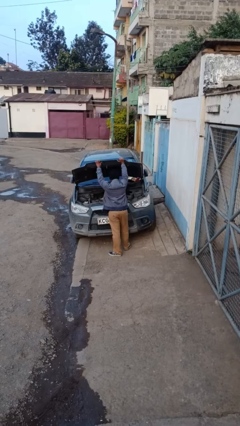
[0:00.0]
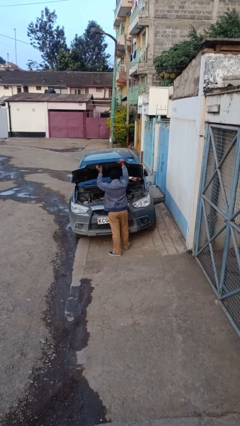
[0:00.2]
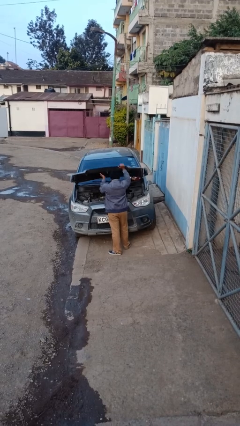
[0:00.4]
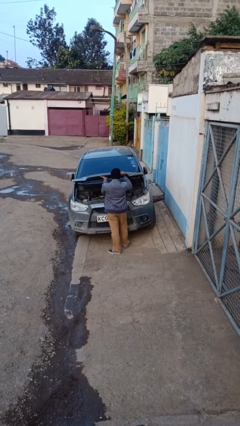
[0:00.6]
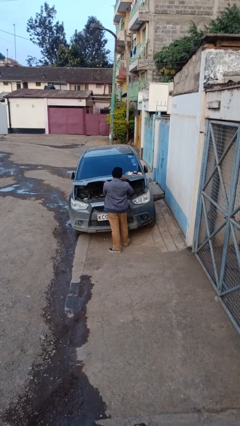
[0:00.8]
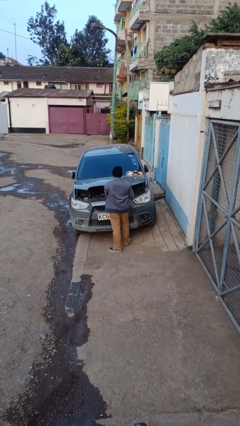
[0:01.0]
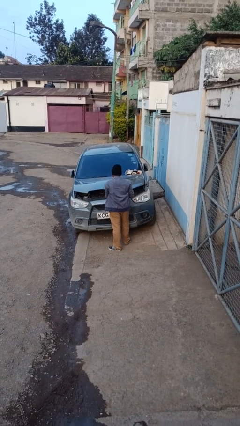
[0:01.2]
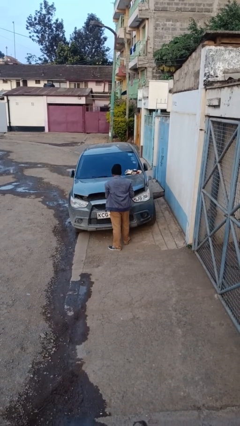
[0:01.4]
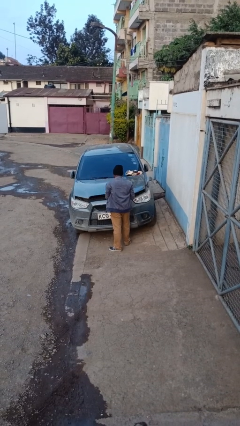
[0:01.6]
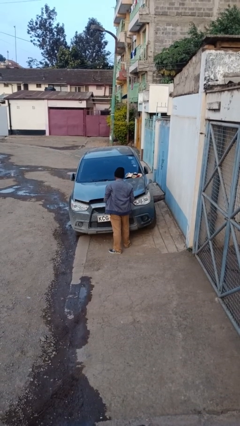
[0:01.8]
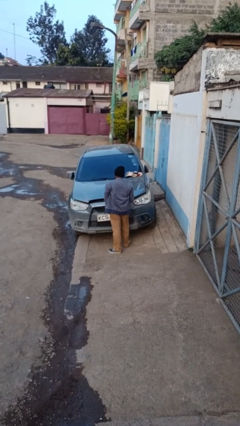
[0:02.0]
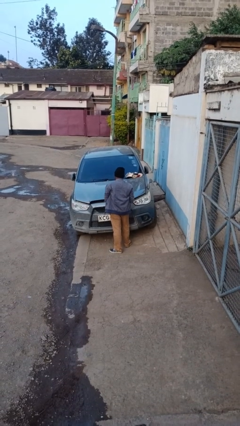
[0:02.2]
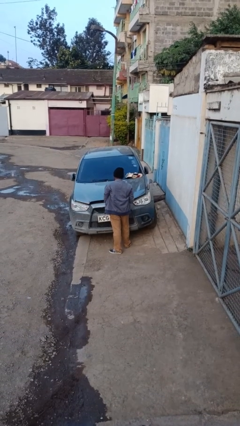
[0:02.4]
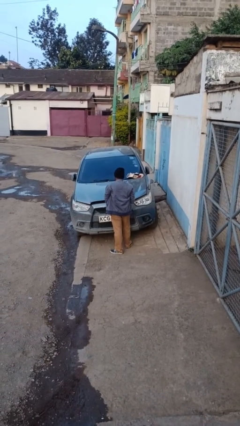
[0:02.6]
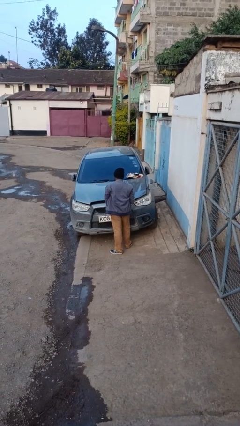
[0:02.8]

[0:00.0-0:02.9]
person closes car hood

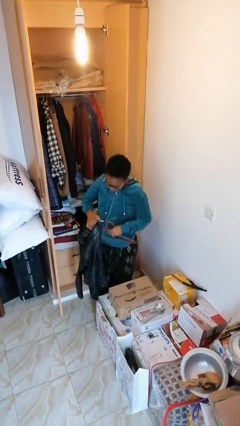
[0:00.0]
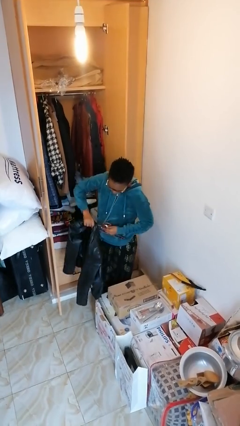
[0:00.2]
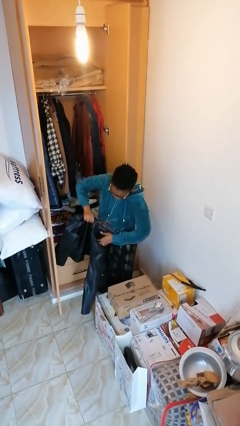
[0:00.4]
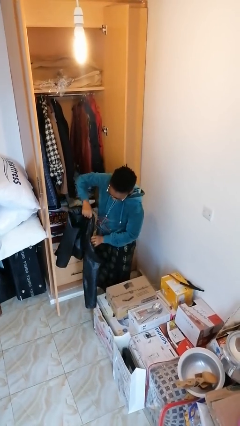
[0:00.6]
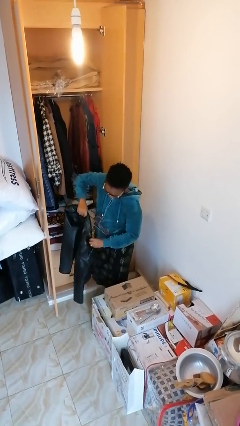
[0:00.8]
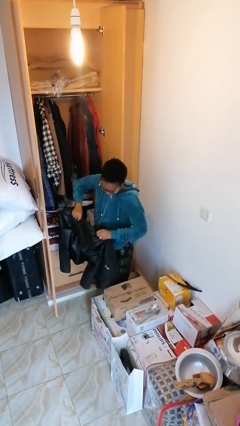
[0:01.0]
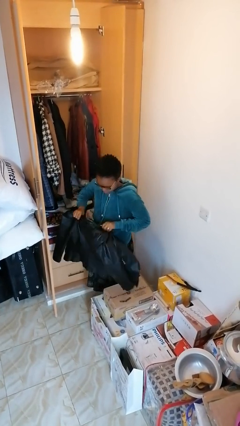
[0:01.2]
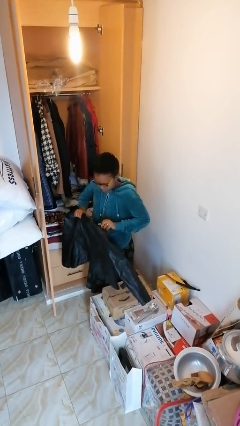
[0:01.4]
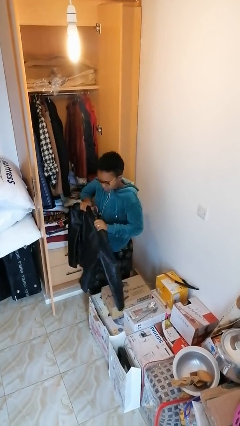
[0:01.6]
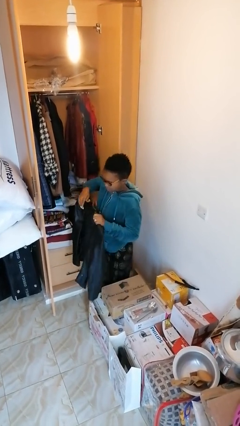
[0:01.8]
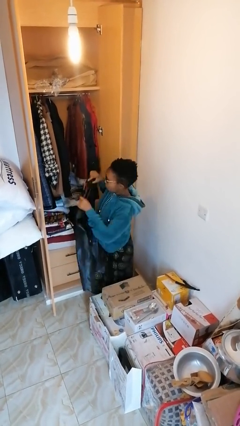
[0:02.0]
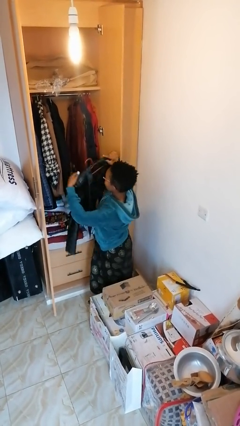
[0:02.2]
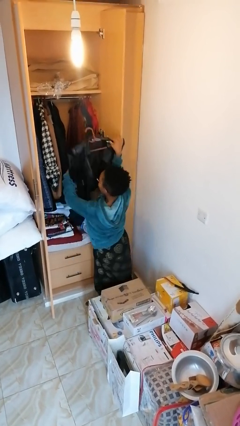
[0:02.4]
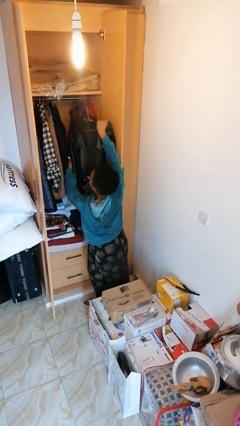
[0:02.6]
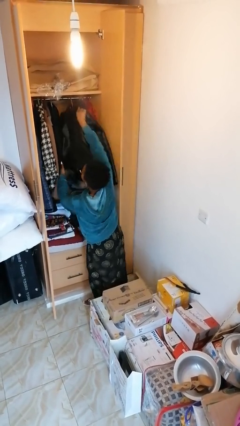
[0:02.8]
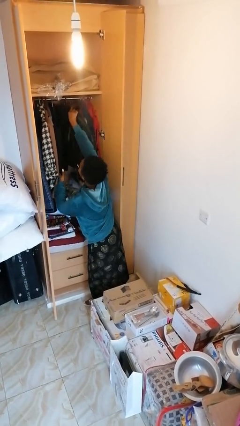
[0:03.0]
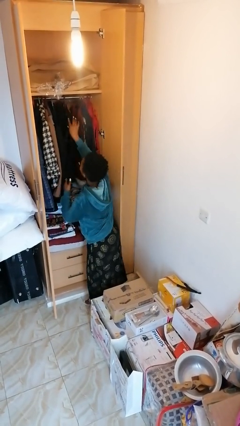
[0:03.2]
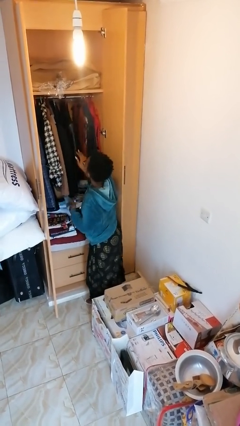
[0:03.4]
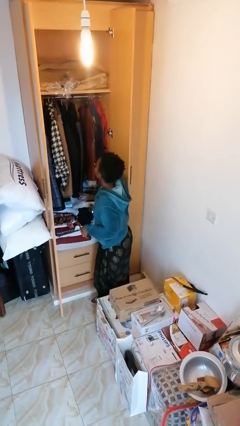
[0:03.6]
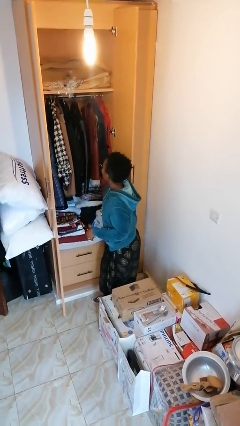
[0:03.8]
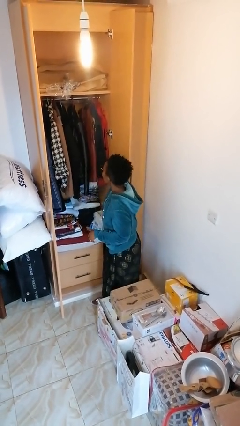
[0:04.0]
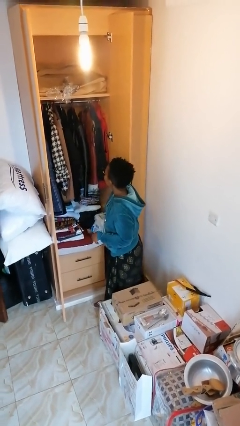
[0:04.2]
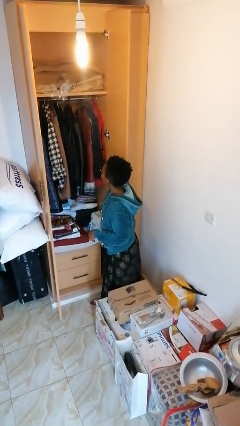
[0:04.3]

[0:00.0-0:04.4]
person puts clothes into closet

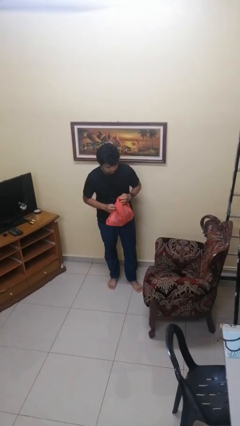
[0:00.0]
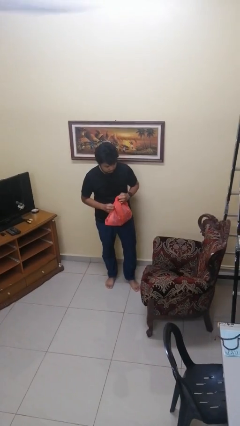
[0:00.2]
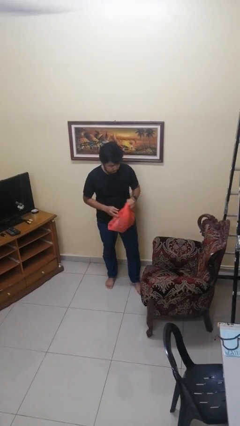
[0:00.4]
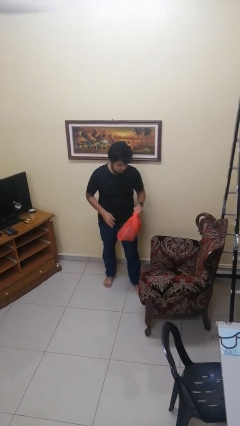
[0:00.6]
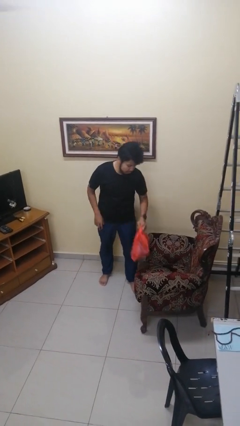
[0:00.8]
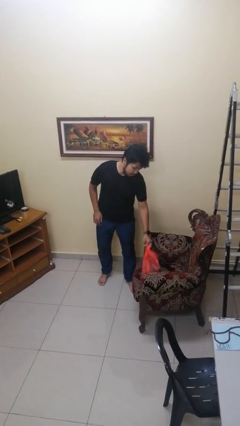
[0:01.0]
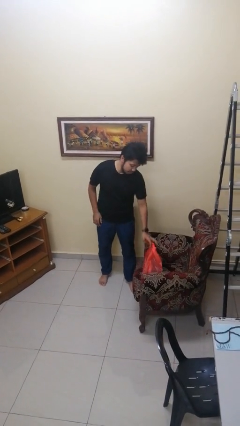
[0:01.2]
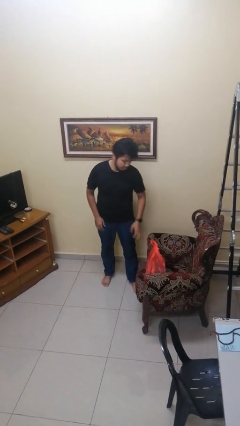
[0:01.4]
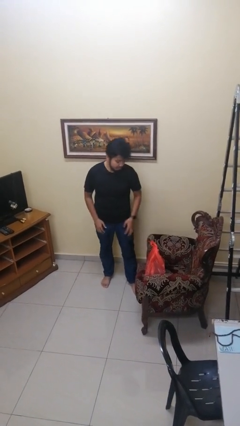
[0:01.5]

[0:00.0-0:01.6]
person puts down object on couch

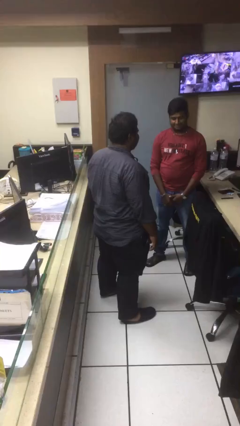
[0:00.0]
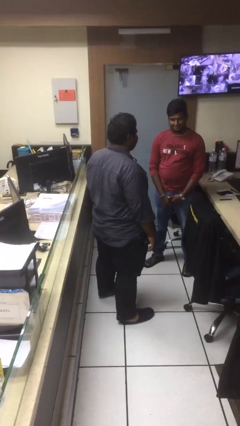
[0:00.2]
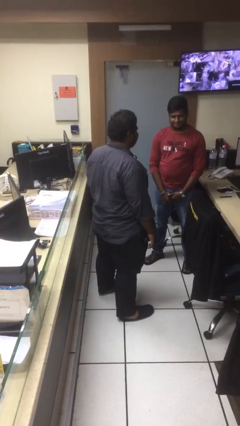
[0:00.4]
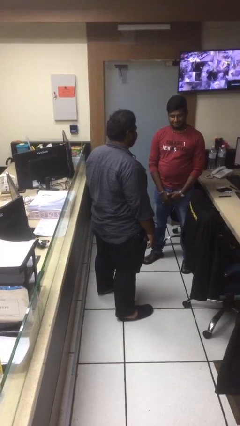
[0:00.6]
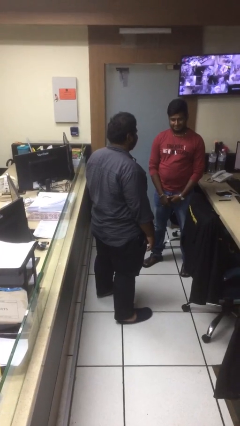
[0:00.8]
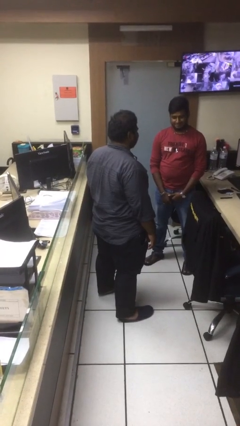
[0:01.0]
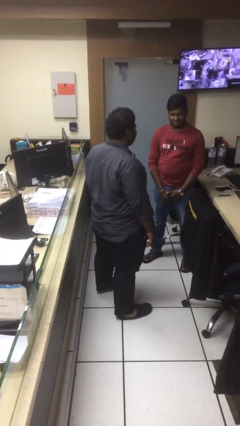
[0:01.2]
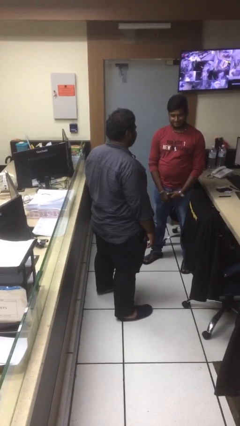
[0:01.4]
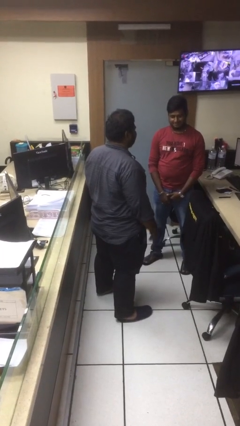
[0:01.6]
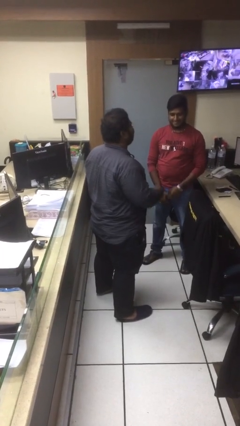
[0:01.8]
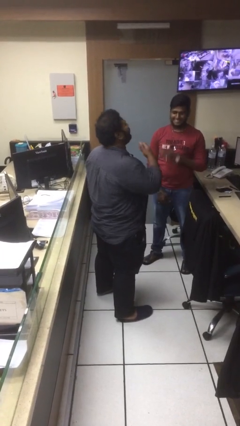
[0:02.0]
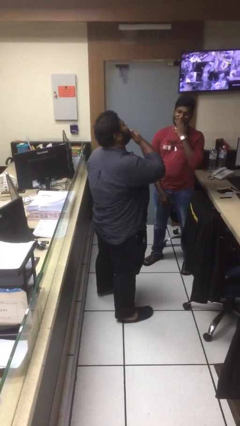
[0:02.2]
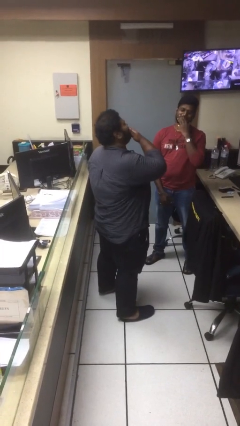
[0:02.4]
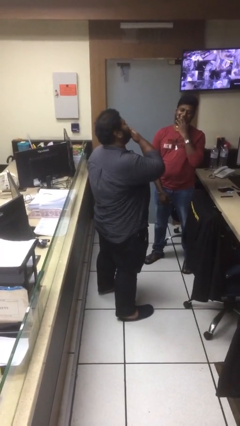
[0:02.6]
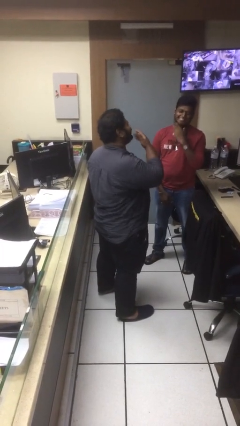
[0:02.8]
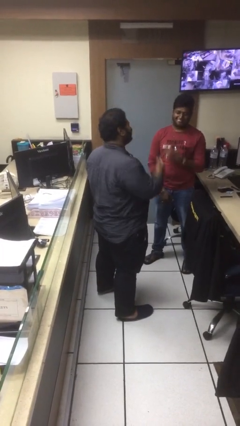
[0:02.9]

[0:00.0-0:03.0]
person laughs with person

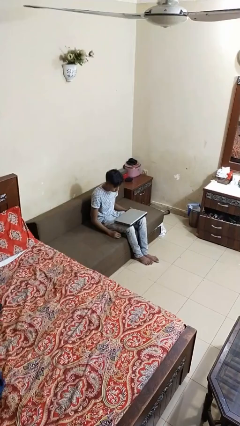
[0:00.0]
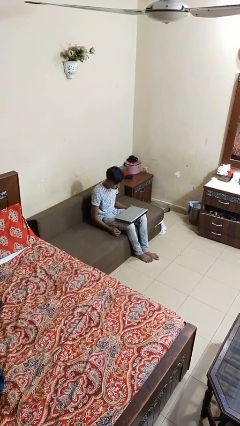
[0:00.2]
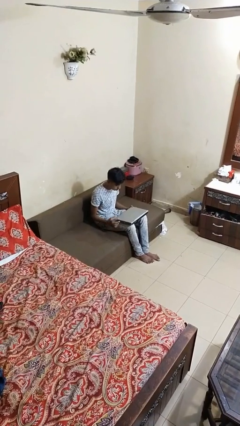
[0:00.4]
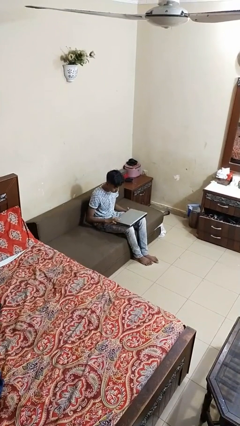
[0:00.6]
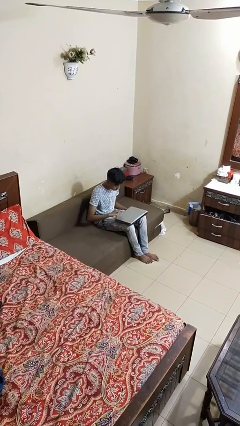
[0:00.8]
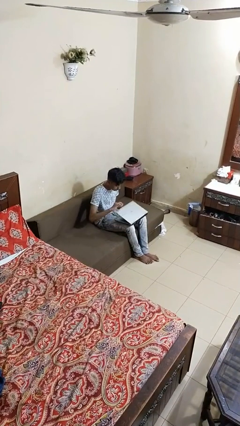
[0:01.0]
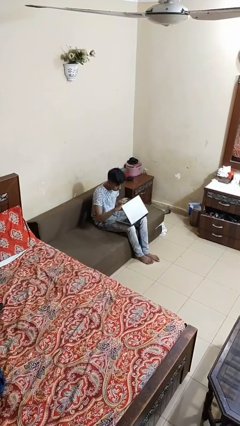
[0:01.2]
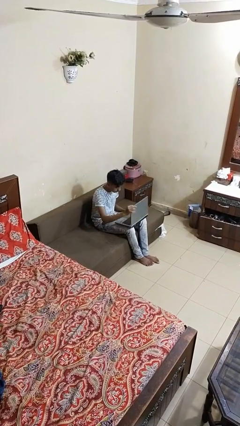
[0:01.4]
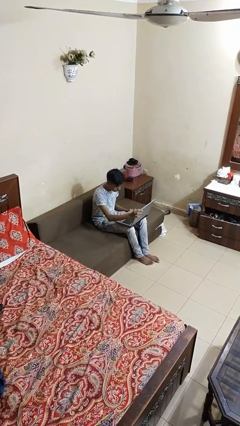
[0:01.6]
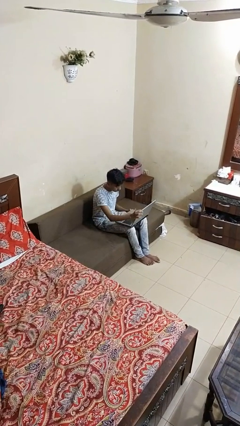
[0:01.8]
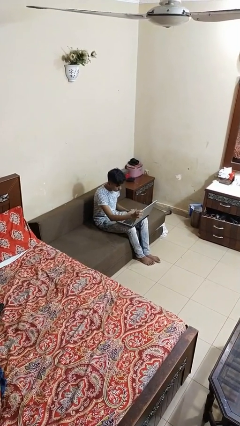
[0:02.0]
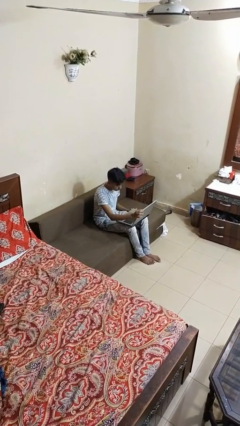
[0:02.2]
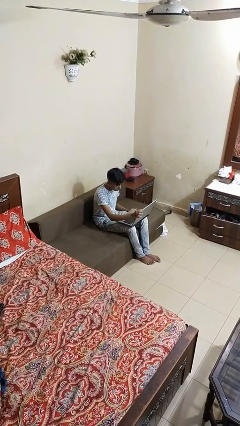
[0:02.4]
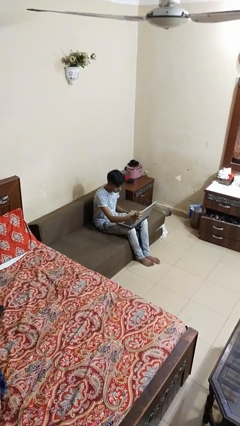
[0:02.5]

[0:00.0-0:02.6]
person opens laptop

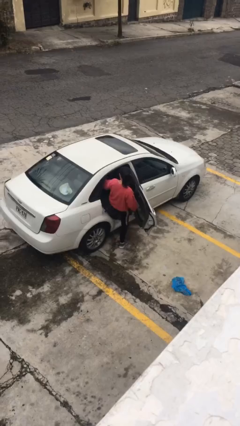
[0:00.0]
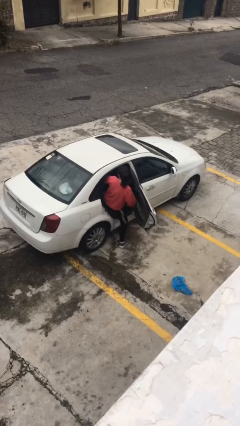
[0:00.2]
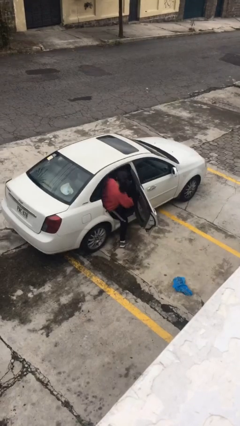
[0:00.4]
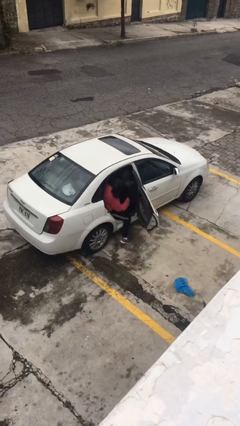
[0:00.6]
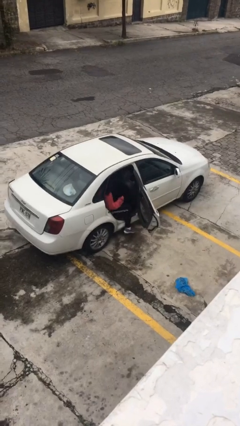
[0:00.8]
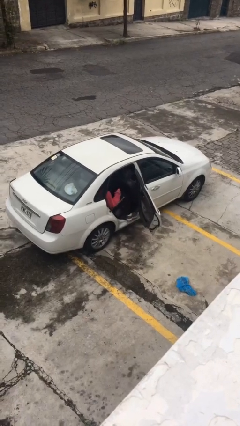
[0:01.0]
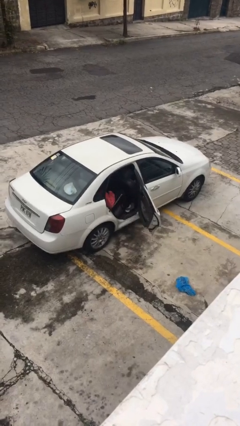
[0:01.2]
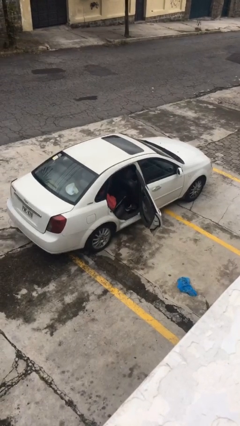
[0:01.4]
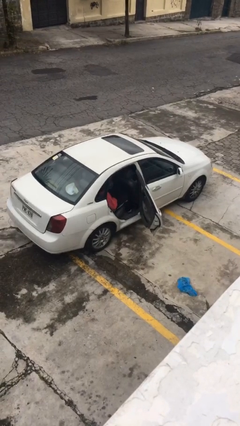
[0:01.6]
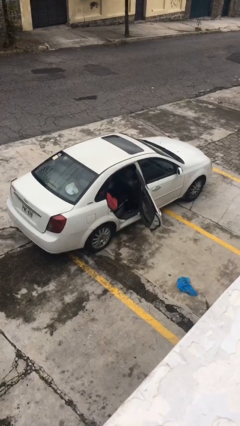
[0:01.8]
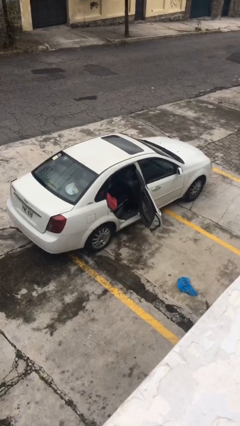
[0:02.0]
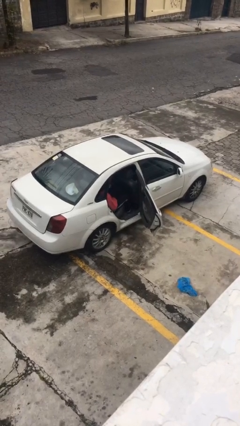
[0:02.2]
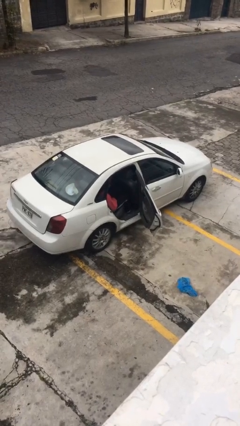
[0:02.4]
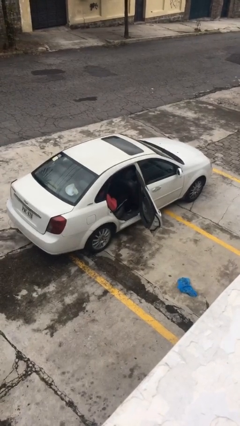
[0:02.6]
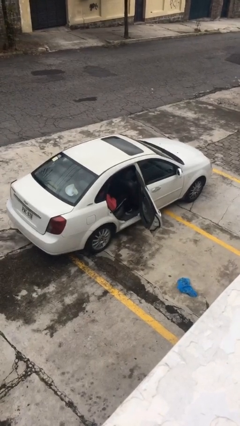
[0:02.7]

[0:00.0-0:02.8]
person enters car
